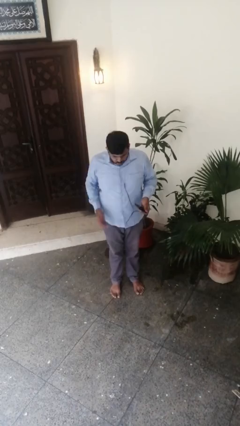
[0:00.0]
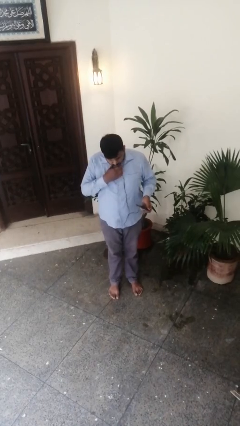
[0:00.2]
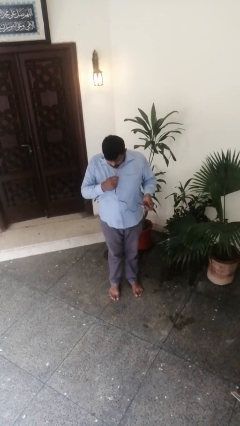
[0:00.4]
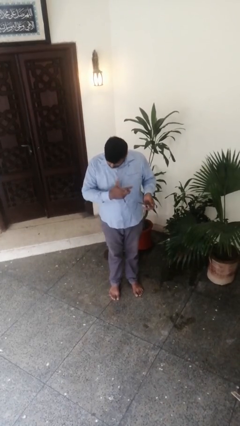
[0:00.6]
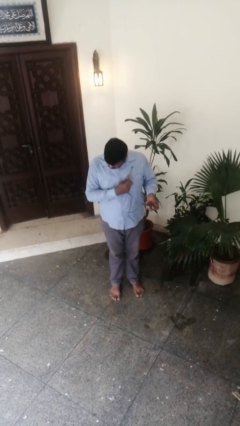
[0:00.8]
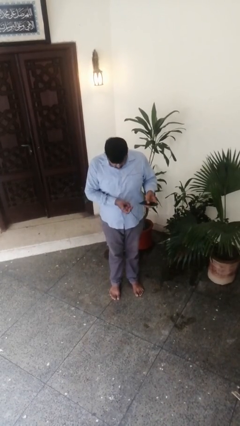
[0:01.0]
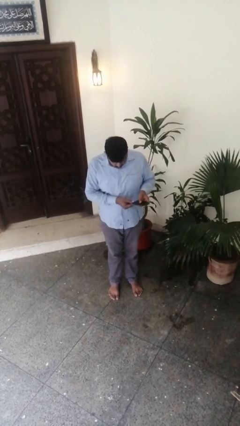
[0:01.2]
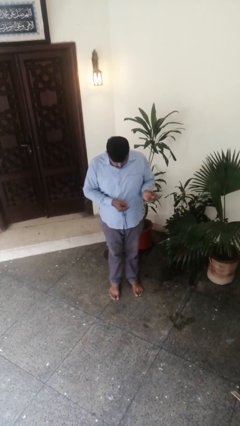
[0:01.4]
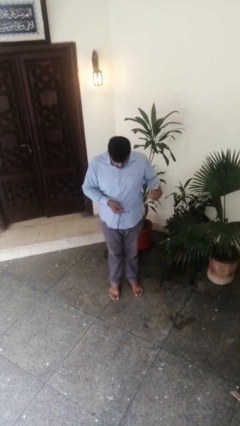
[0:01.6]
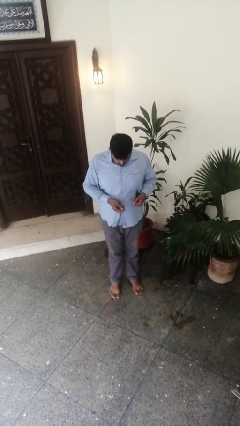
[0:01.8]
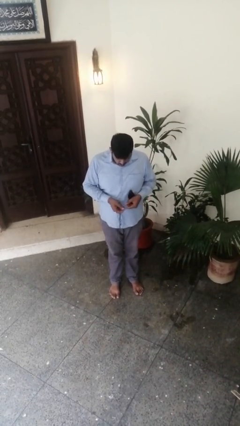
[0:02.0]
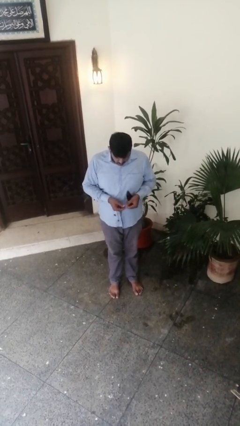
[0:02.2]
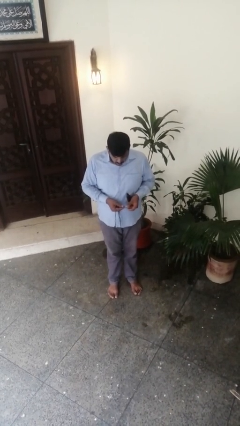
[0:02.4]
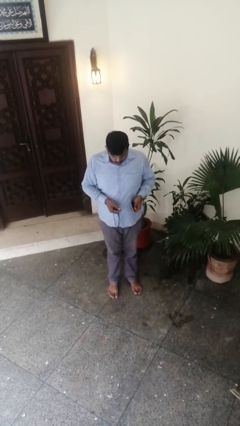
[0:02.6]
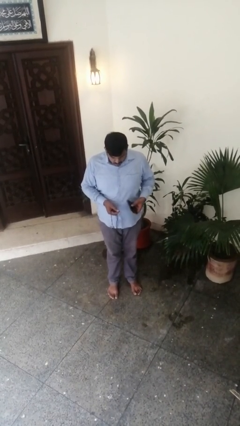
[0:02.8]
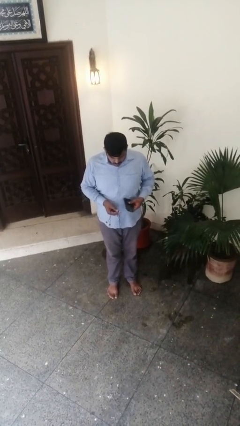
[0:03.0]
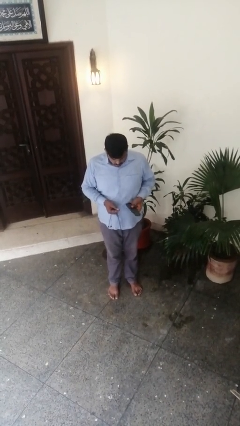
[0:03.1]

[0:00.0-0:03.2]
person takes off headphones

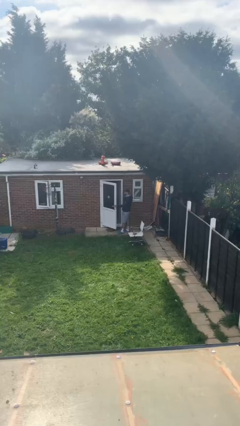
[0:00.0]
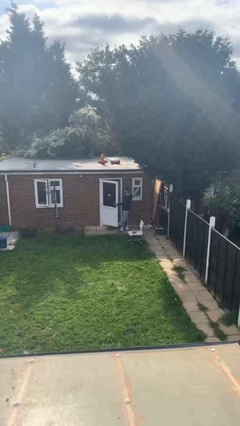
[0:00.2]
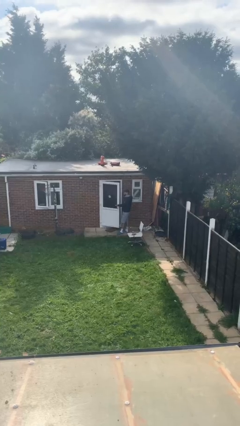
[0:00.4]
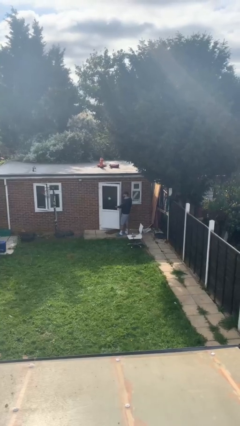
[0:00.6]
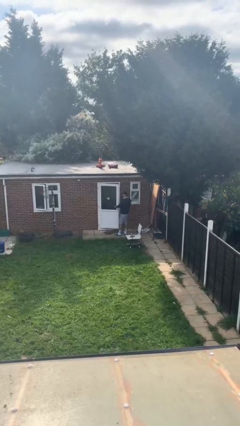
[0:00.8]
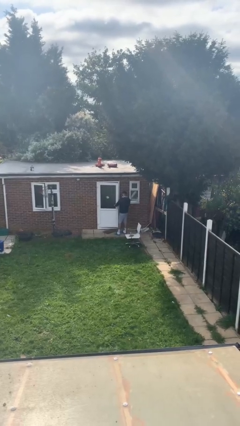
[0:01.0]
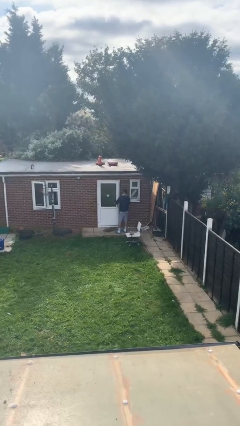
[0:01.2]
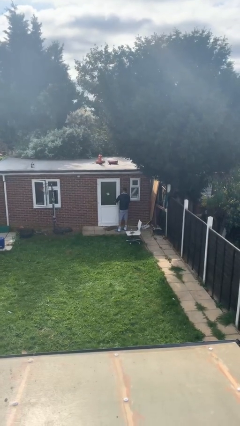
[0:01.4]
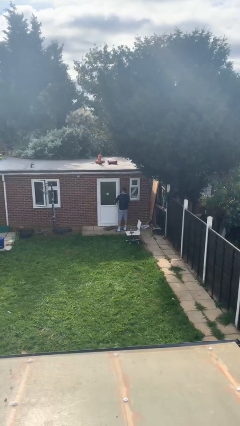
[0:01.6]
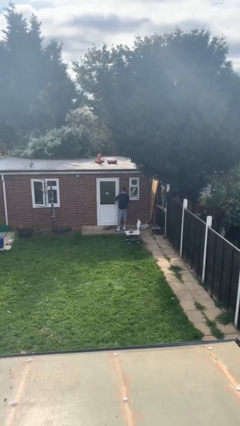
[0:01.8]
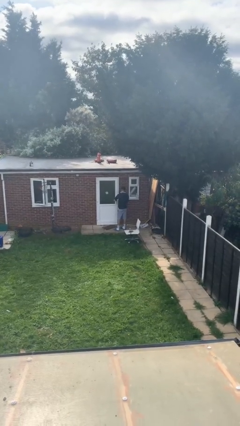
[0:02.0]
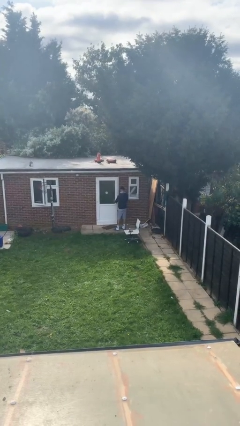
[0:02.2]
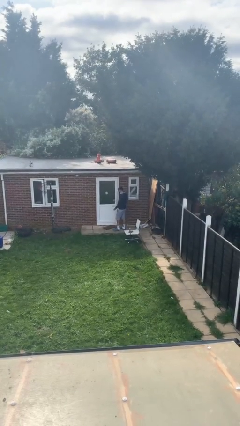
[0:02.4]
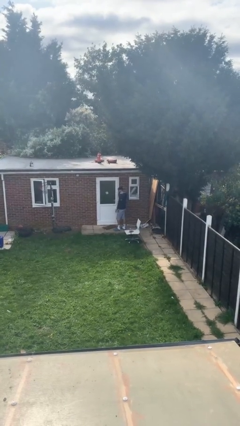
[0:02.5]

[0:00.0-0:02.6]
person closes facility door

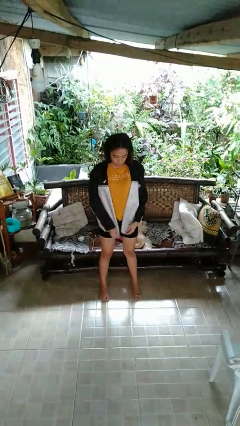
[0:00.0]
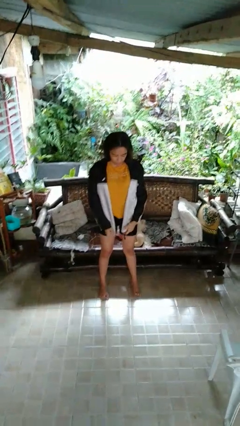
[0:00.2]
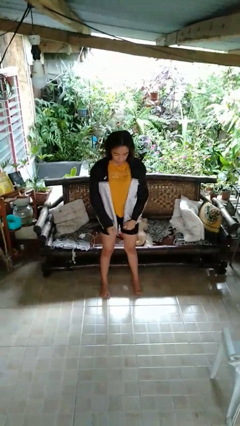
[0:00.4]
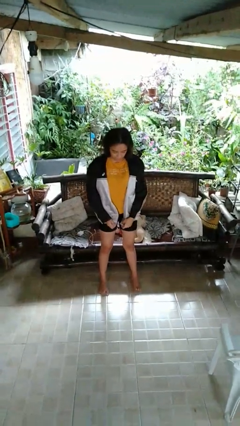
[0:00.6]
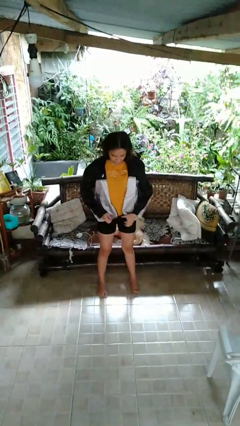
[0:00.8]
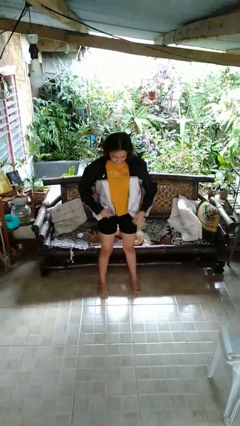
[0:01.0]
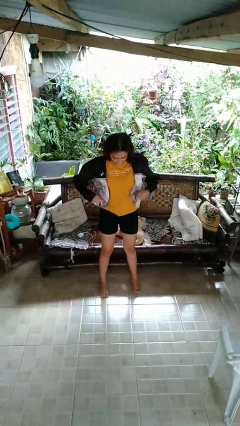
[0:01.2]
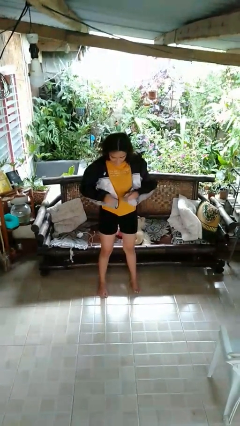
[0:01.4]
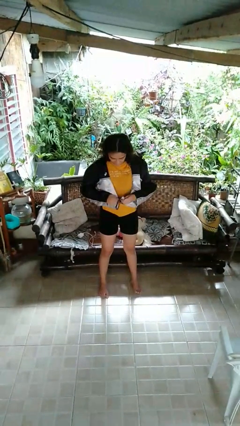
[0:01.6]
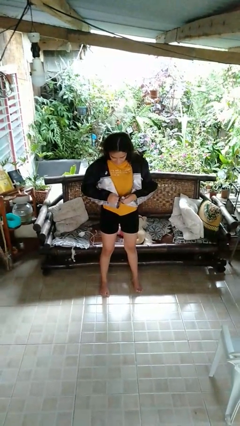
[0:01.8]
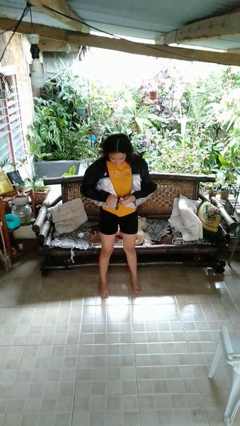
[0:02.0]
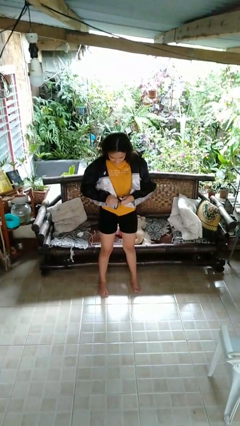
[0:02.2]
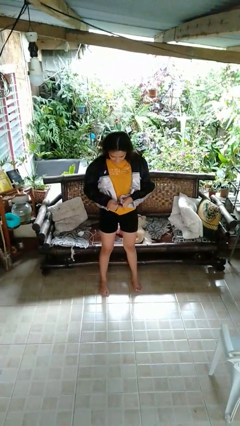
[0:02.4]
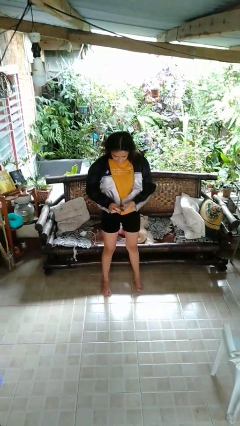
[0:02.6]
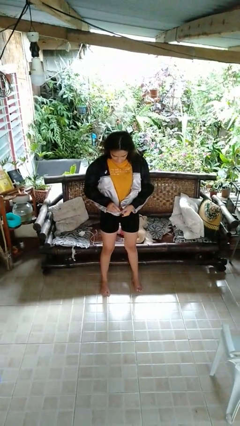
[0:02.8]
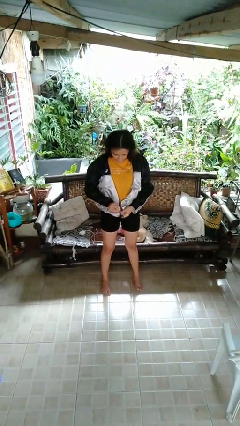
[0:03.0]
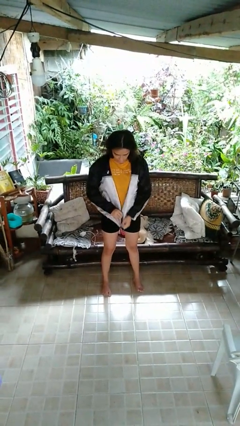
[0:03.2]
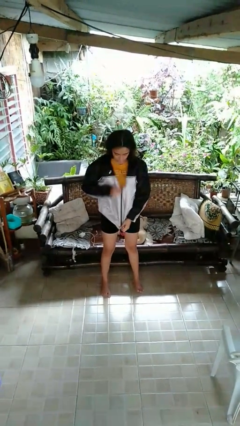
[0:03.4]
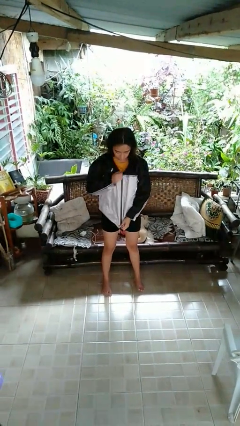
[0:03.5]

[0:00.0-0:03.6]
person zips up jacket

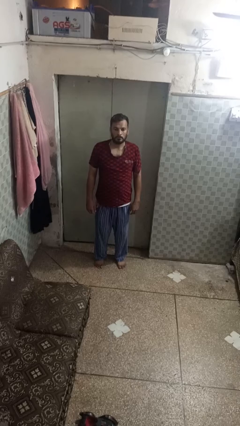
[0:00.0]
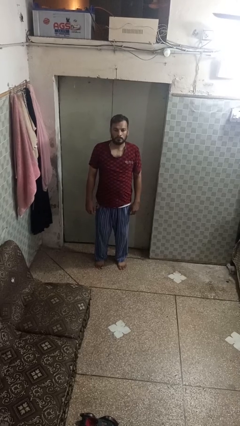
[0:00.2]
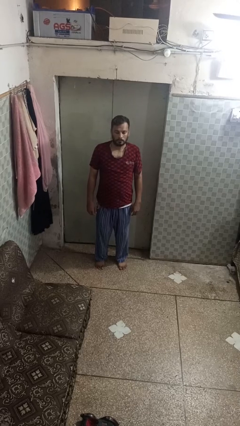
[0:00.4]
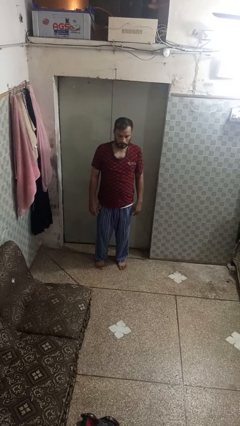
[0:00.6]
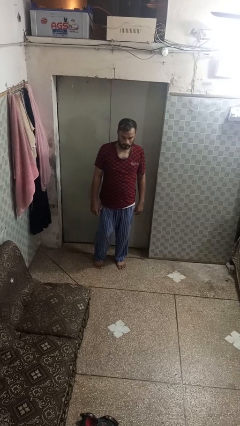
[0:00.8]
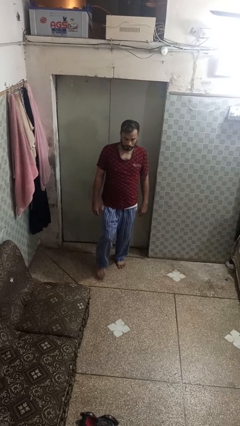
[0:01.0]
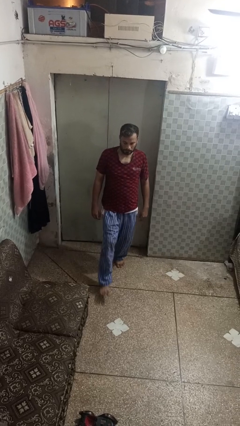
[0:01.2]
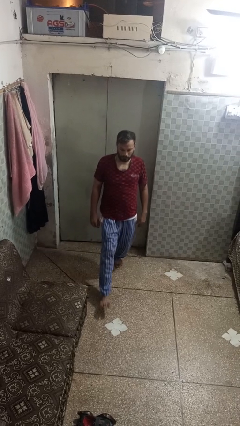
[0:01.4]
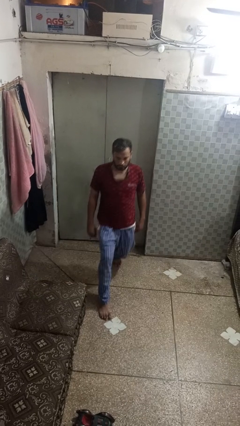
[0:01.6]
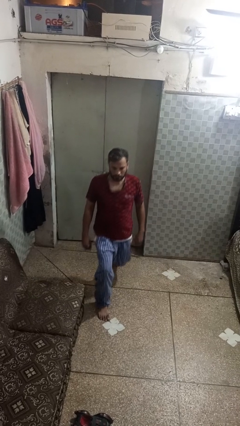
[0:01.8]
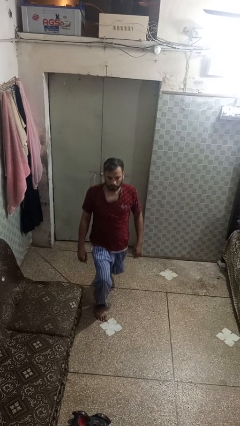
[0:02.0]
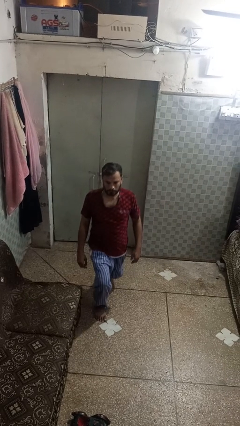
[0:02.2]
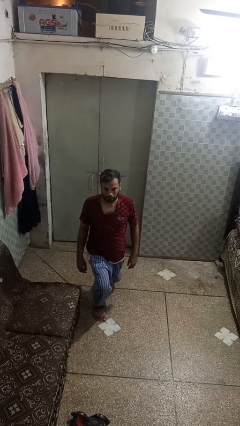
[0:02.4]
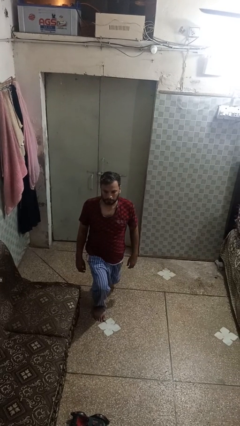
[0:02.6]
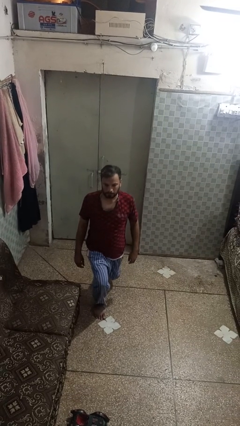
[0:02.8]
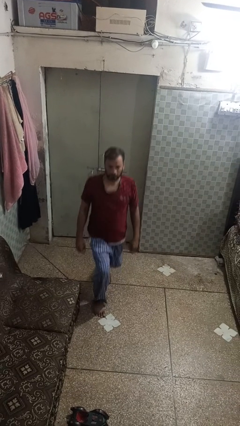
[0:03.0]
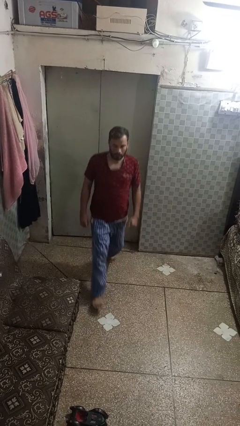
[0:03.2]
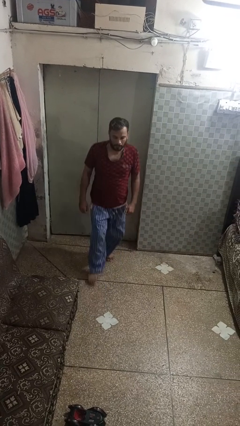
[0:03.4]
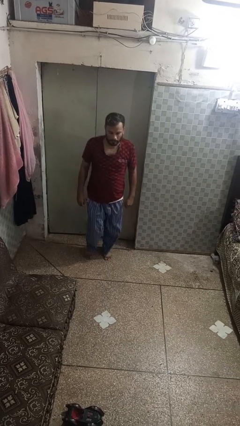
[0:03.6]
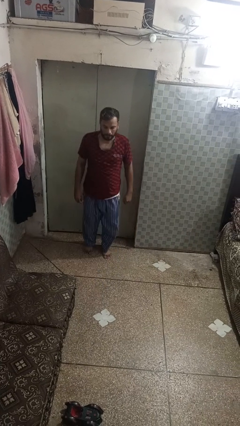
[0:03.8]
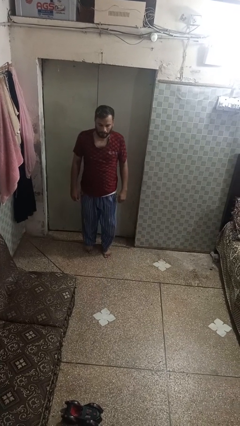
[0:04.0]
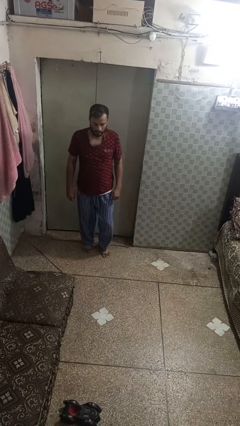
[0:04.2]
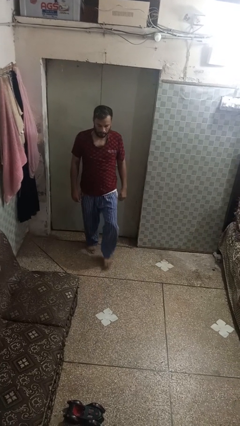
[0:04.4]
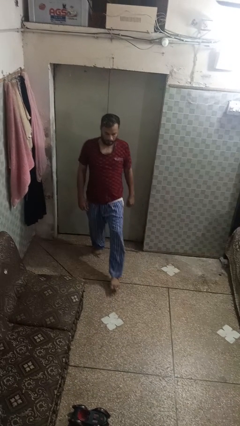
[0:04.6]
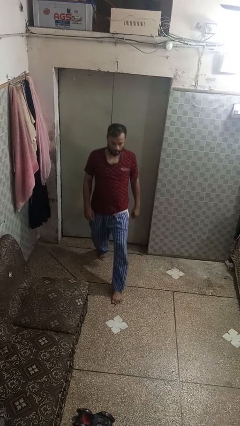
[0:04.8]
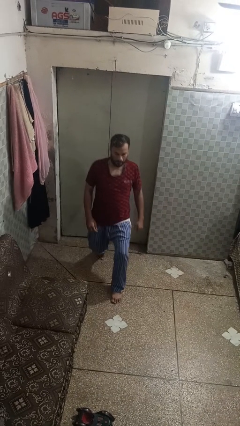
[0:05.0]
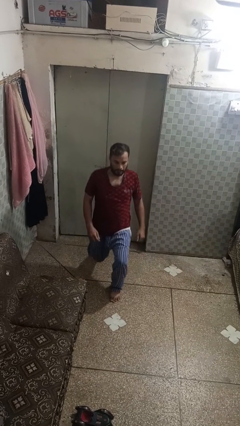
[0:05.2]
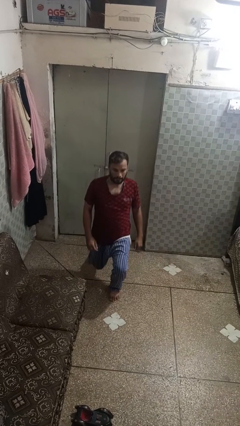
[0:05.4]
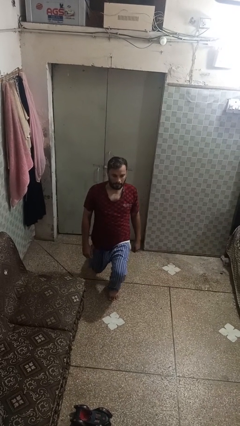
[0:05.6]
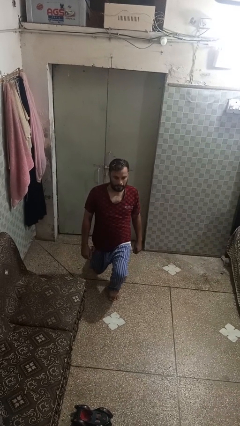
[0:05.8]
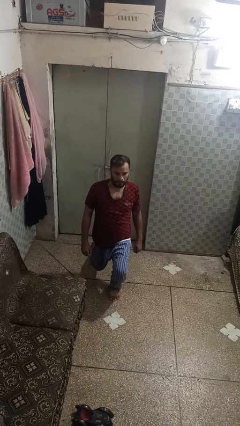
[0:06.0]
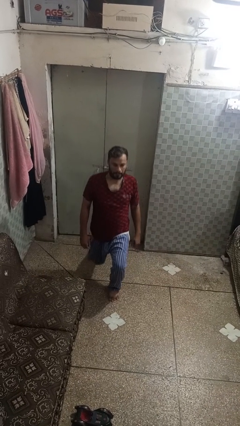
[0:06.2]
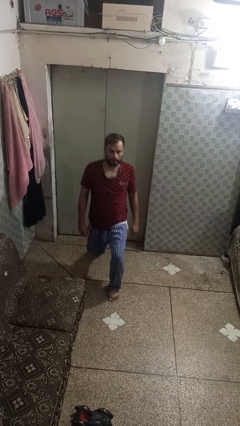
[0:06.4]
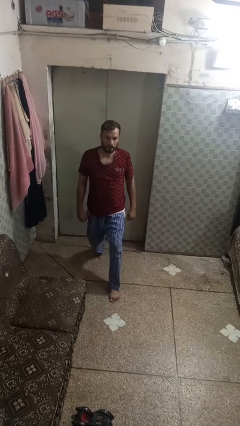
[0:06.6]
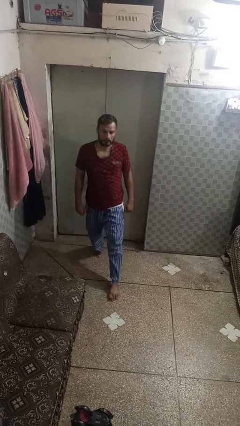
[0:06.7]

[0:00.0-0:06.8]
person exercises with lunges

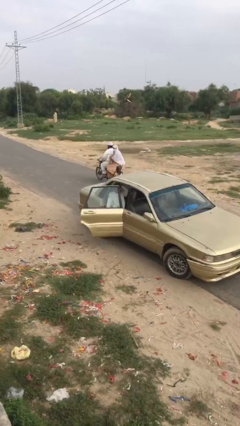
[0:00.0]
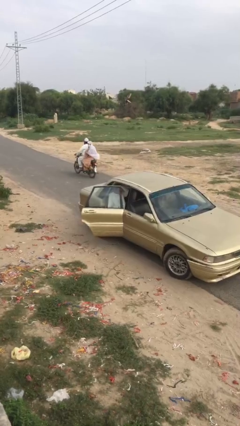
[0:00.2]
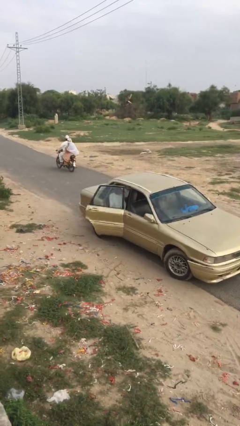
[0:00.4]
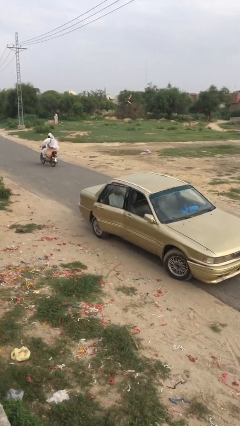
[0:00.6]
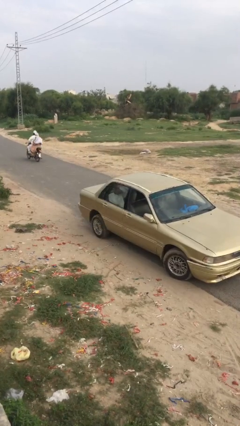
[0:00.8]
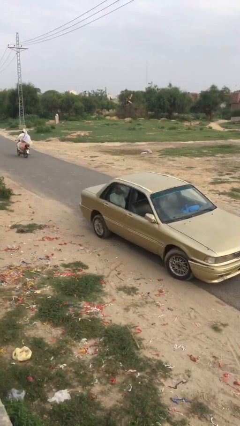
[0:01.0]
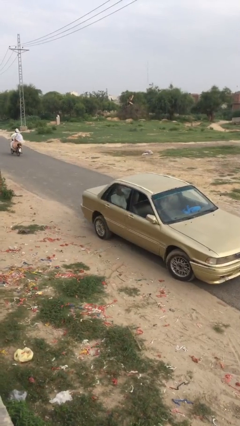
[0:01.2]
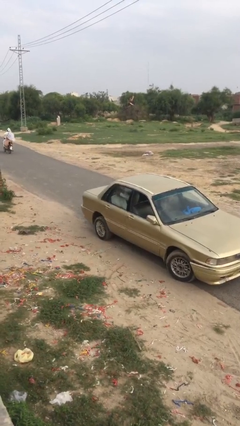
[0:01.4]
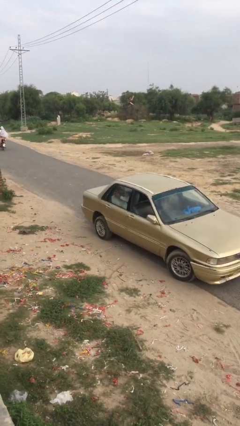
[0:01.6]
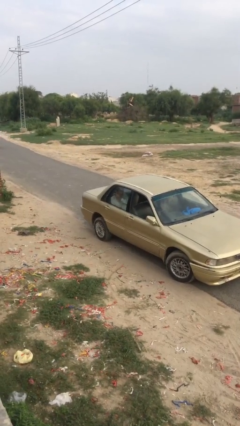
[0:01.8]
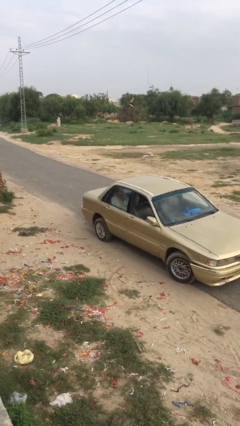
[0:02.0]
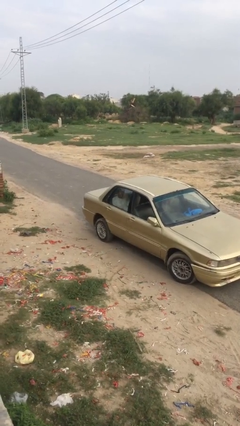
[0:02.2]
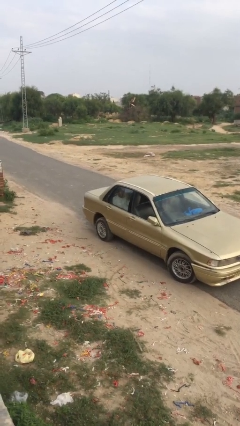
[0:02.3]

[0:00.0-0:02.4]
person closes car door
